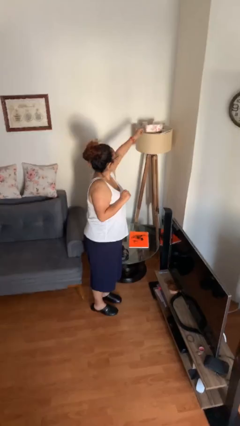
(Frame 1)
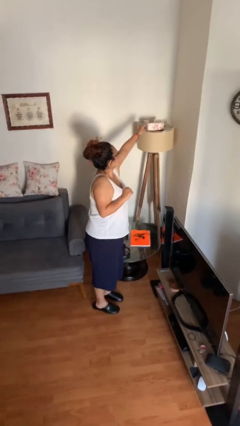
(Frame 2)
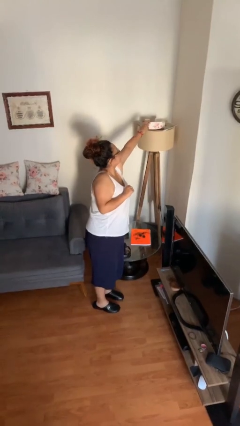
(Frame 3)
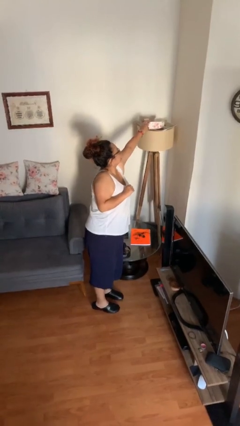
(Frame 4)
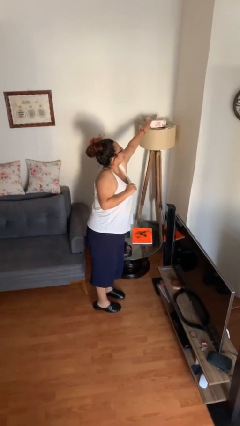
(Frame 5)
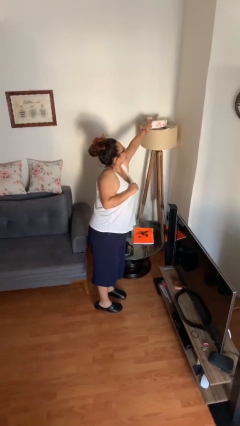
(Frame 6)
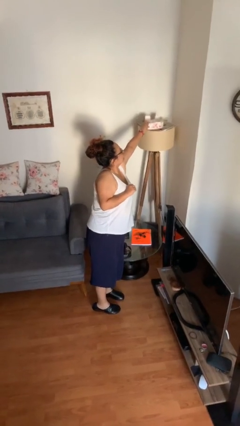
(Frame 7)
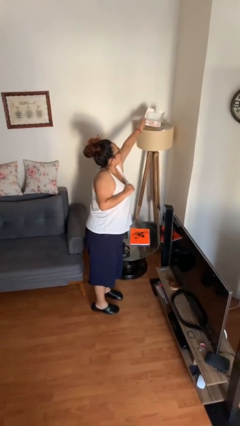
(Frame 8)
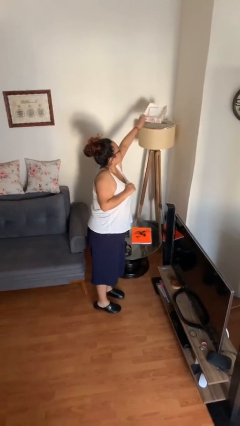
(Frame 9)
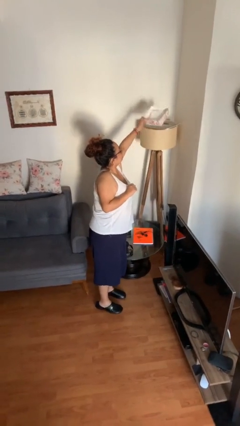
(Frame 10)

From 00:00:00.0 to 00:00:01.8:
person picks up object from shelf

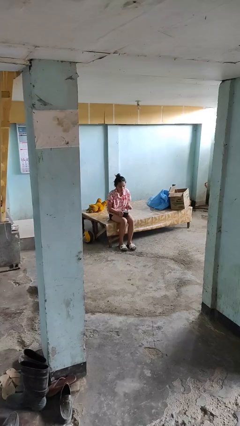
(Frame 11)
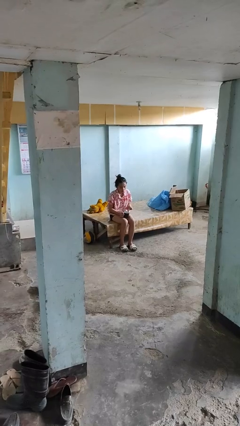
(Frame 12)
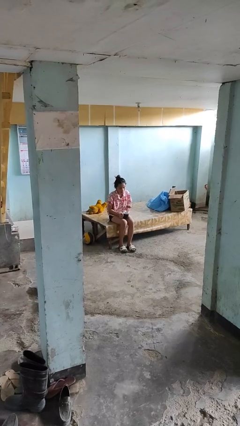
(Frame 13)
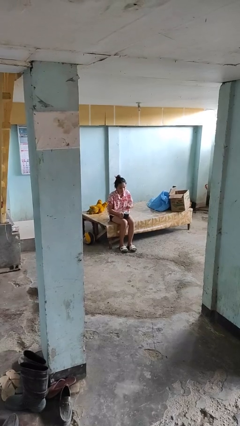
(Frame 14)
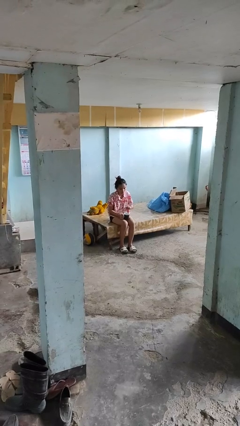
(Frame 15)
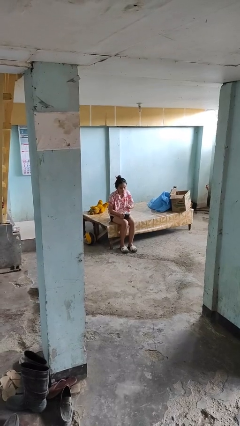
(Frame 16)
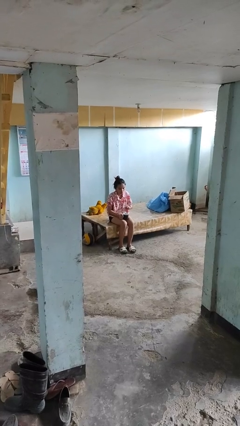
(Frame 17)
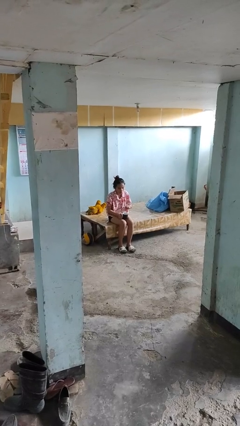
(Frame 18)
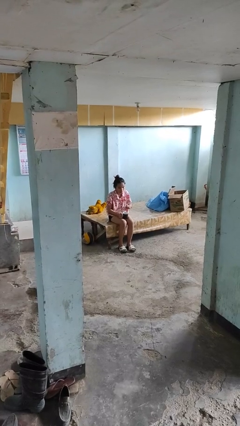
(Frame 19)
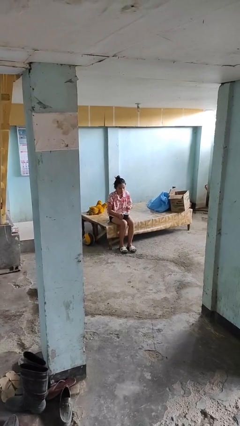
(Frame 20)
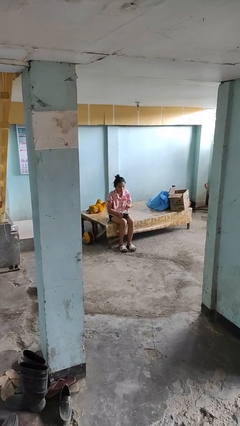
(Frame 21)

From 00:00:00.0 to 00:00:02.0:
person stirs mug

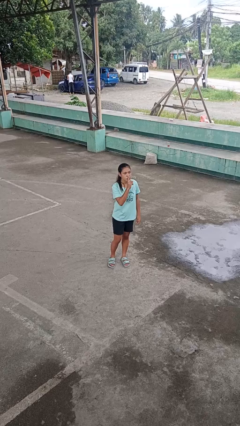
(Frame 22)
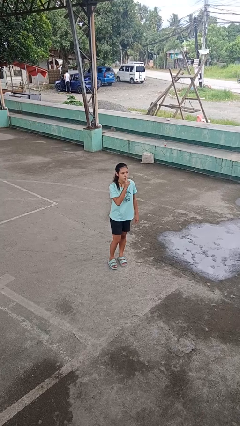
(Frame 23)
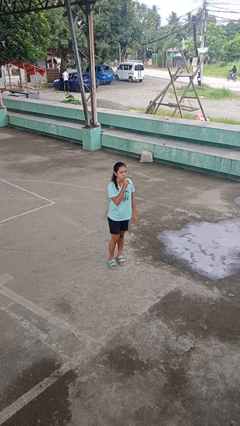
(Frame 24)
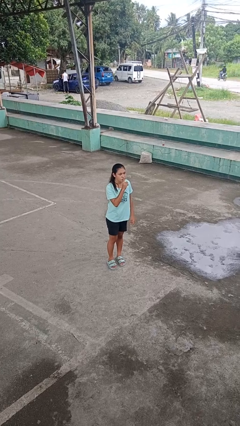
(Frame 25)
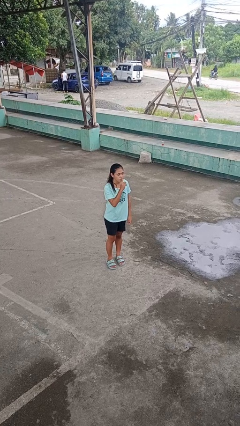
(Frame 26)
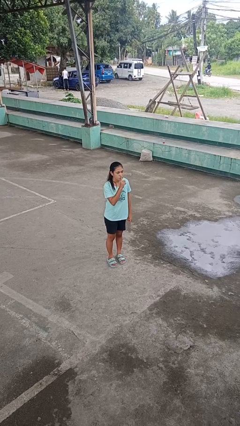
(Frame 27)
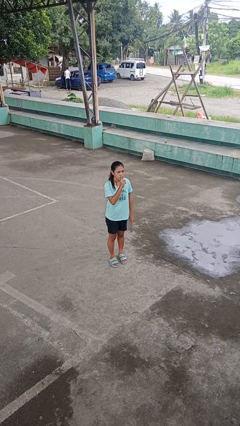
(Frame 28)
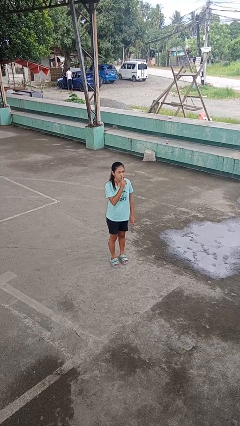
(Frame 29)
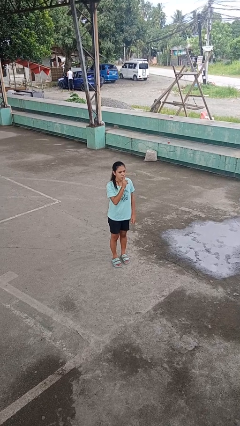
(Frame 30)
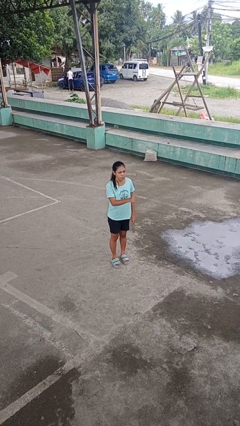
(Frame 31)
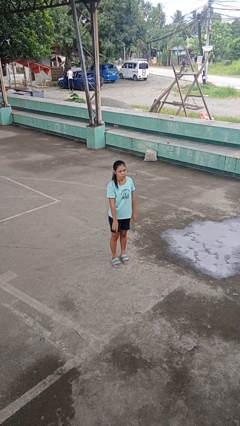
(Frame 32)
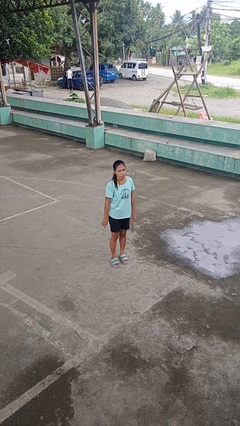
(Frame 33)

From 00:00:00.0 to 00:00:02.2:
person gestures be quiet

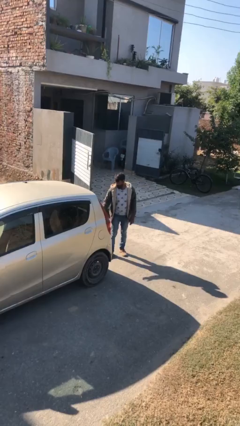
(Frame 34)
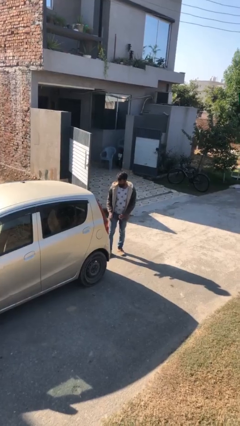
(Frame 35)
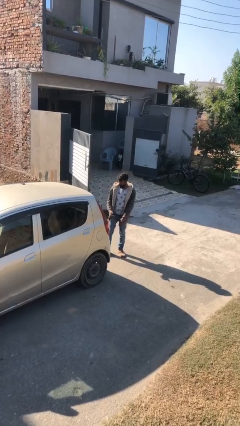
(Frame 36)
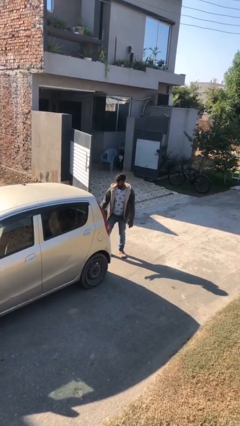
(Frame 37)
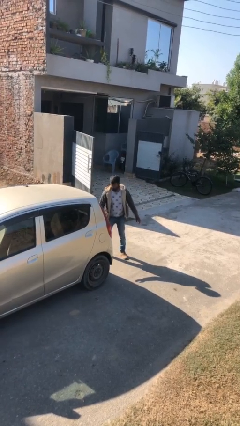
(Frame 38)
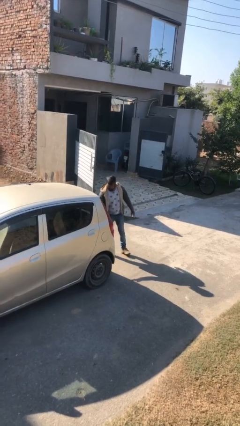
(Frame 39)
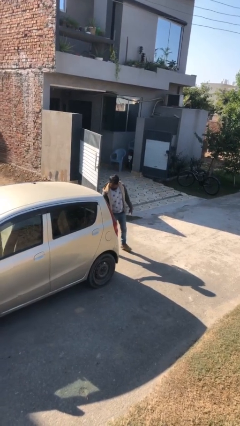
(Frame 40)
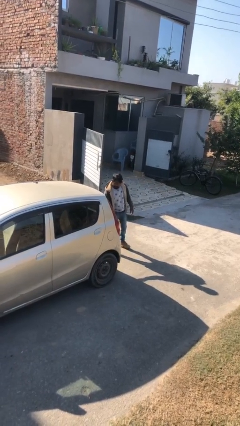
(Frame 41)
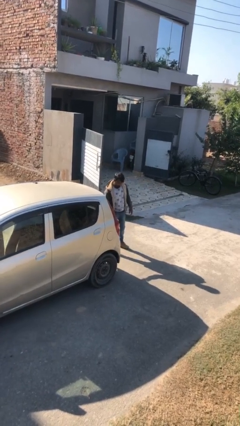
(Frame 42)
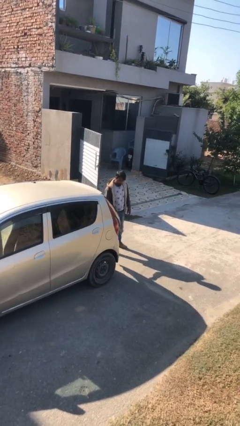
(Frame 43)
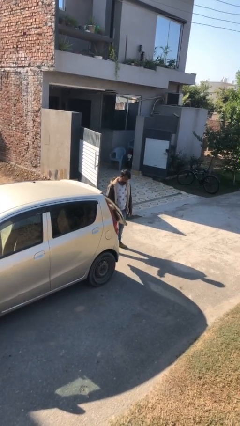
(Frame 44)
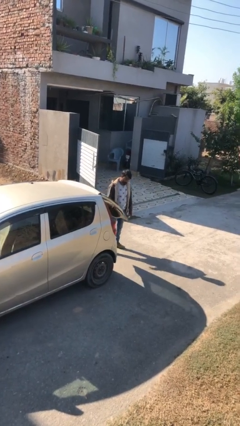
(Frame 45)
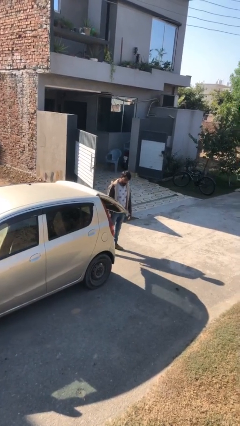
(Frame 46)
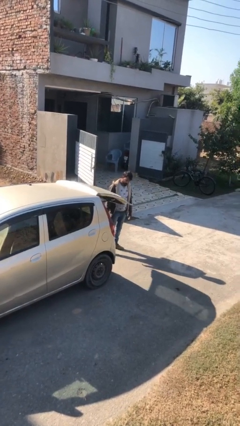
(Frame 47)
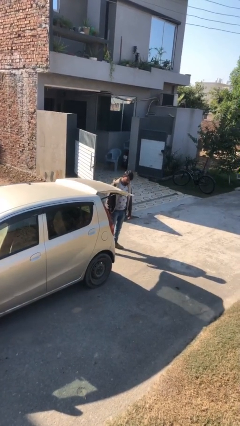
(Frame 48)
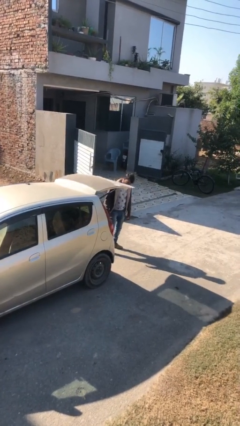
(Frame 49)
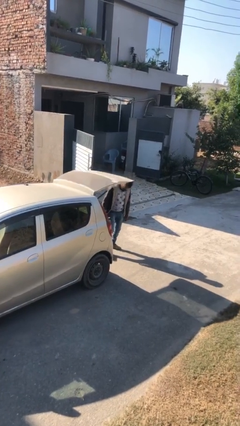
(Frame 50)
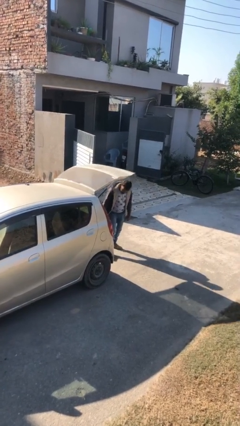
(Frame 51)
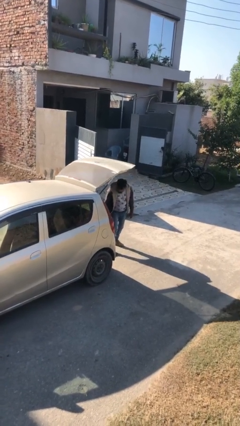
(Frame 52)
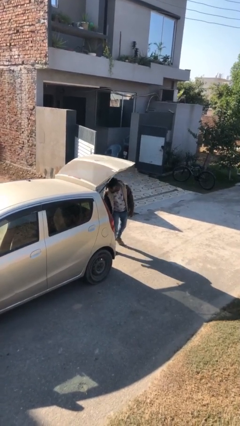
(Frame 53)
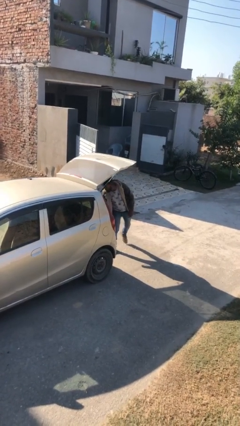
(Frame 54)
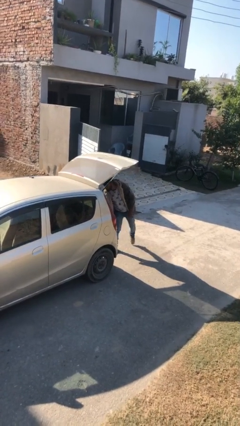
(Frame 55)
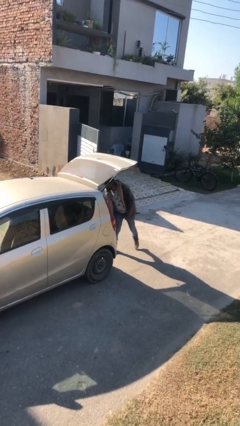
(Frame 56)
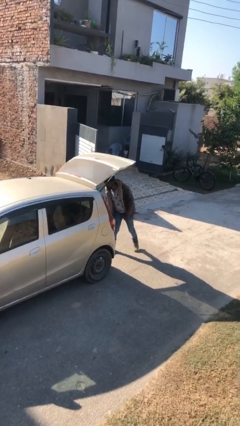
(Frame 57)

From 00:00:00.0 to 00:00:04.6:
person opens car trunk

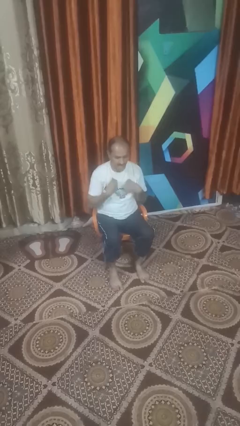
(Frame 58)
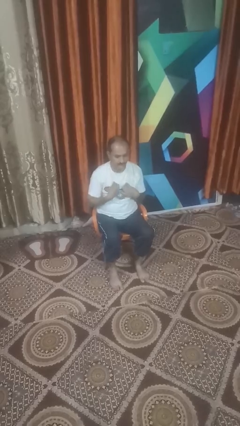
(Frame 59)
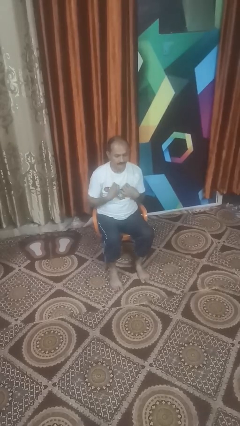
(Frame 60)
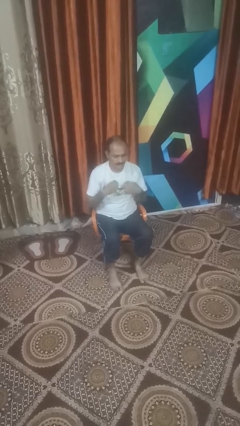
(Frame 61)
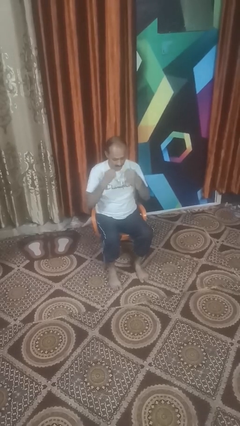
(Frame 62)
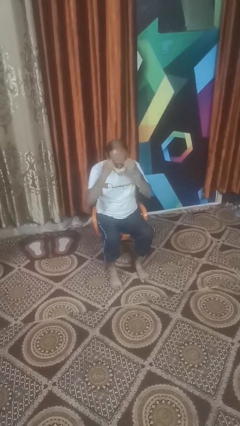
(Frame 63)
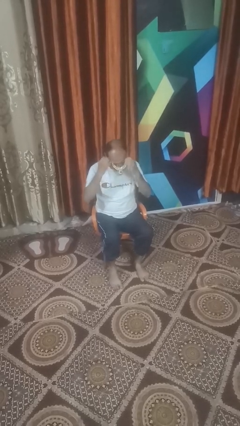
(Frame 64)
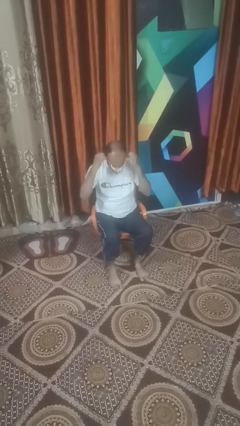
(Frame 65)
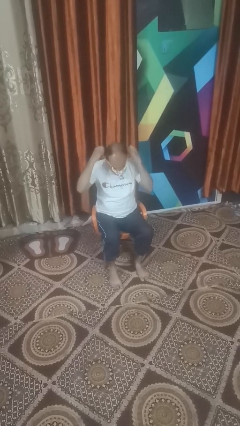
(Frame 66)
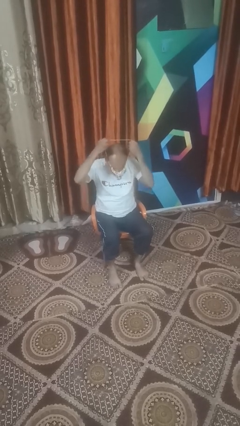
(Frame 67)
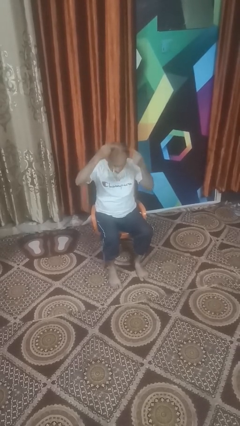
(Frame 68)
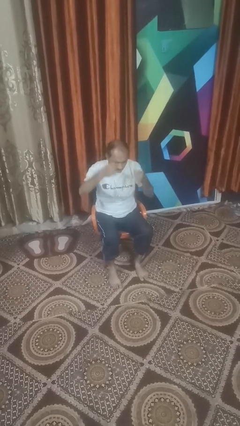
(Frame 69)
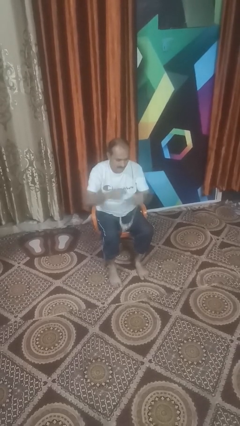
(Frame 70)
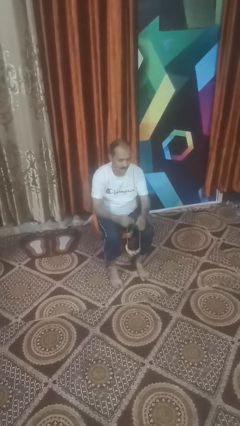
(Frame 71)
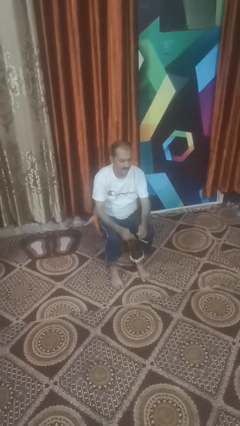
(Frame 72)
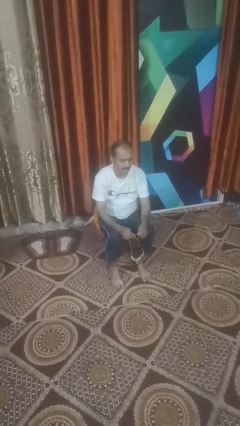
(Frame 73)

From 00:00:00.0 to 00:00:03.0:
person takes off necklace

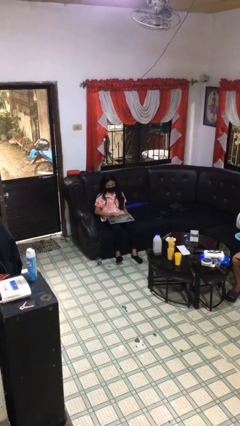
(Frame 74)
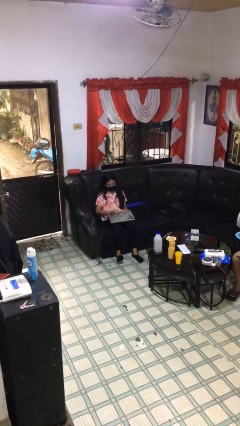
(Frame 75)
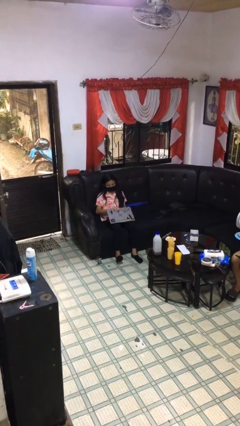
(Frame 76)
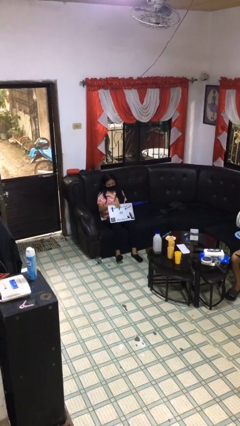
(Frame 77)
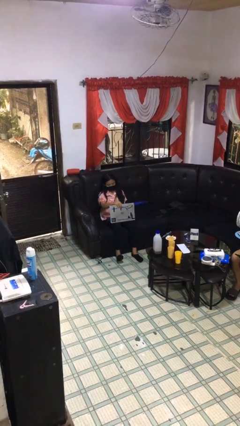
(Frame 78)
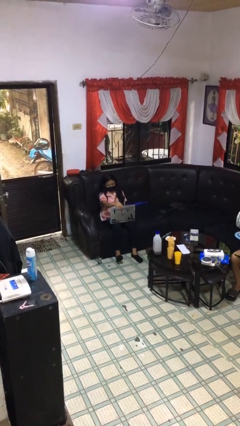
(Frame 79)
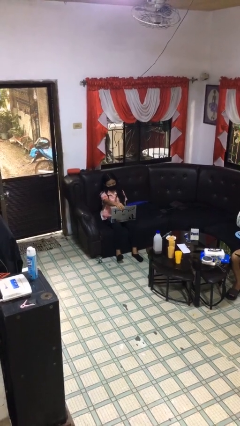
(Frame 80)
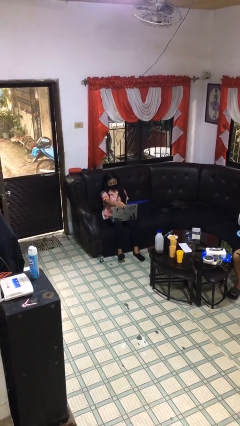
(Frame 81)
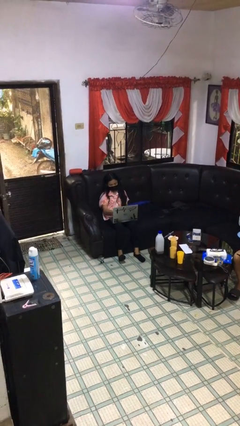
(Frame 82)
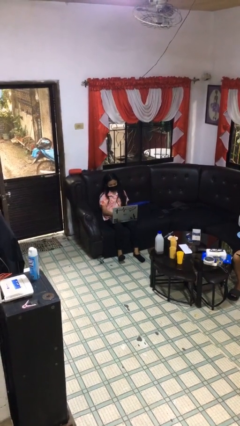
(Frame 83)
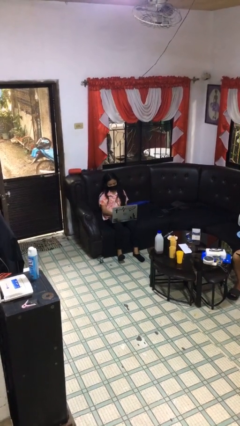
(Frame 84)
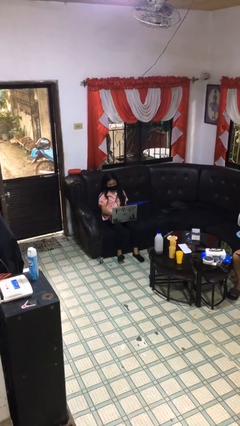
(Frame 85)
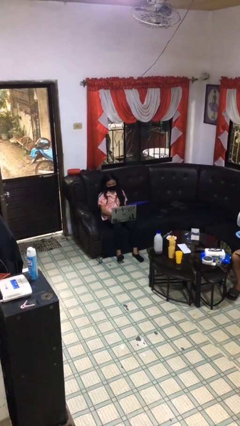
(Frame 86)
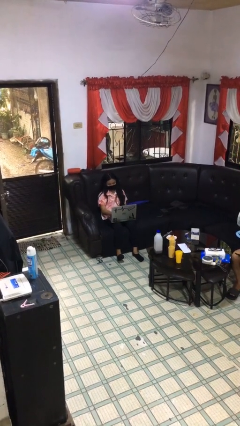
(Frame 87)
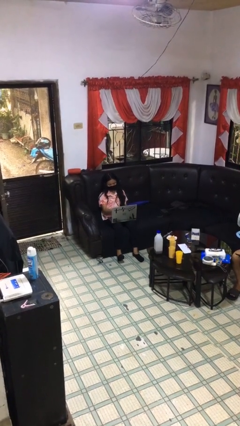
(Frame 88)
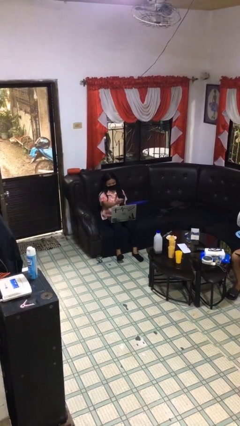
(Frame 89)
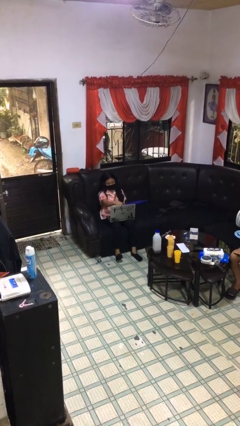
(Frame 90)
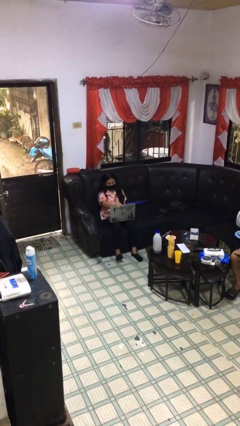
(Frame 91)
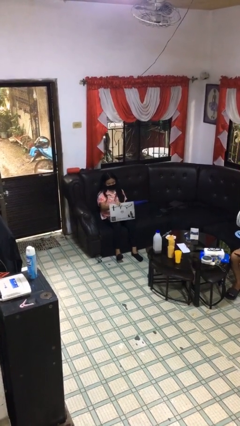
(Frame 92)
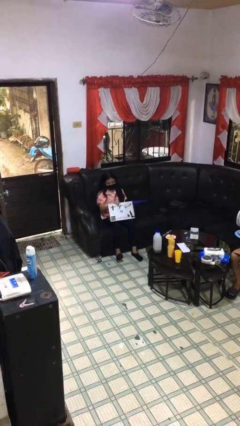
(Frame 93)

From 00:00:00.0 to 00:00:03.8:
person interacts with laptop
